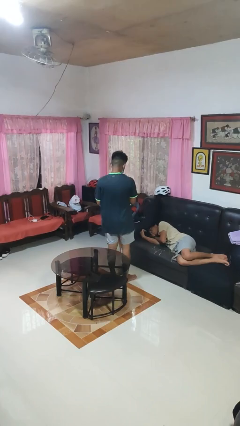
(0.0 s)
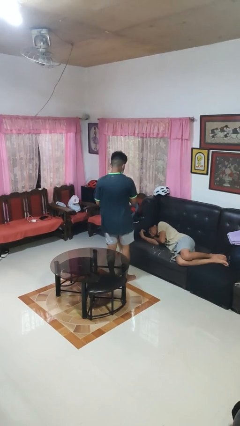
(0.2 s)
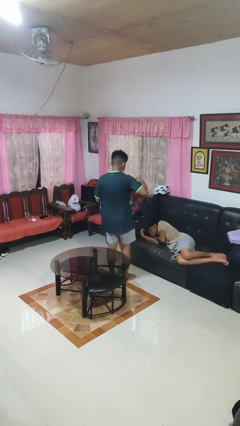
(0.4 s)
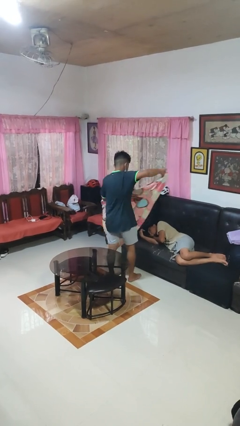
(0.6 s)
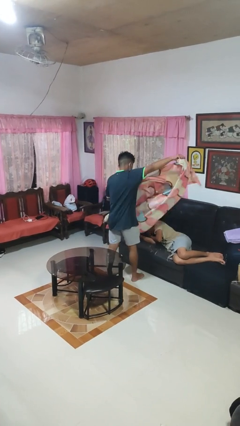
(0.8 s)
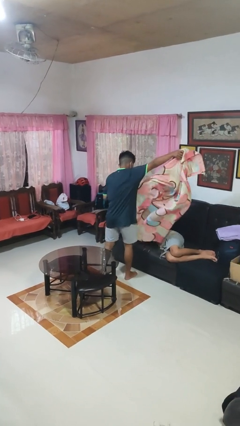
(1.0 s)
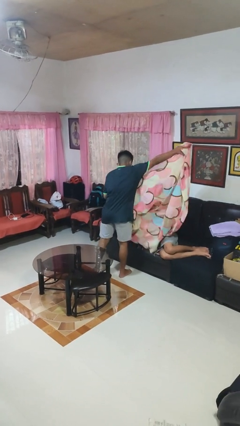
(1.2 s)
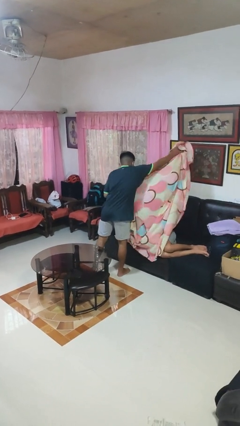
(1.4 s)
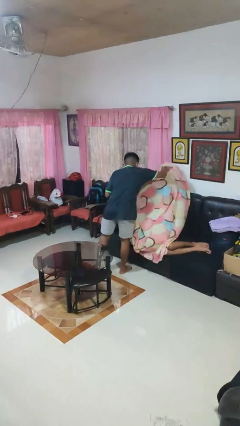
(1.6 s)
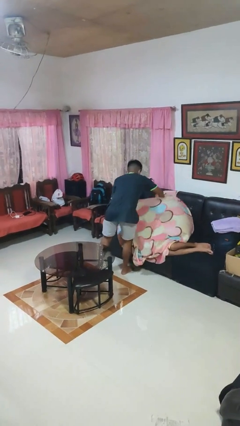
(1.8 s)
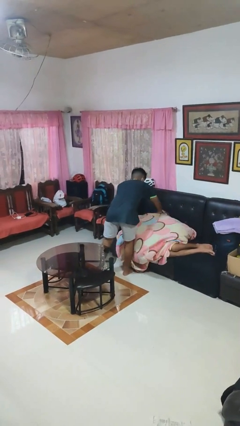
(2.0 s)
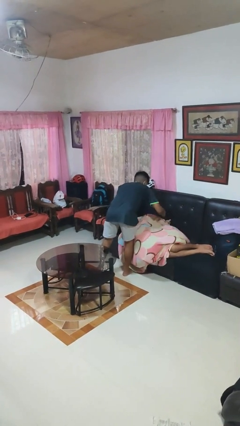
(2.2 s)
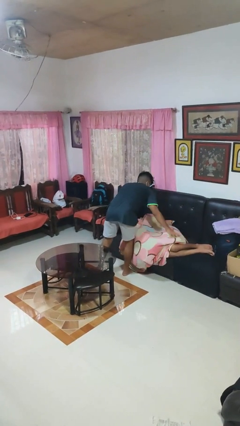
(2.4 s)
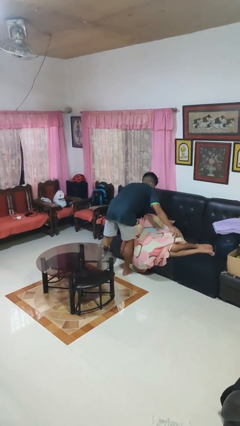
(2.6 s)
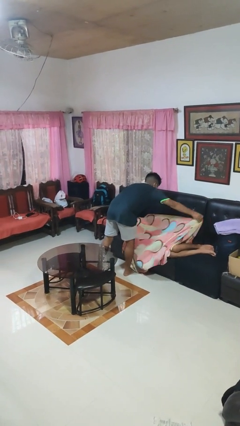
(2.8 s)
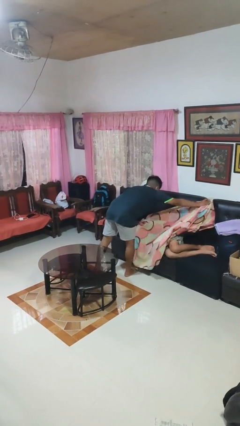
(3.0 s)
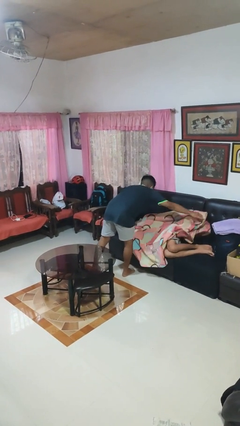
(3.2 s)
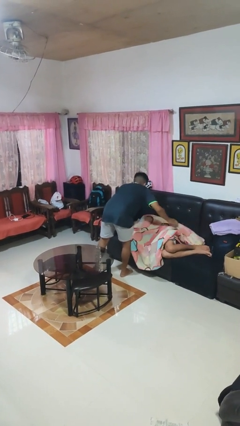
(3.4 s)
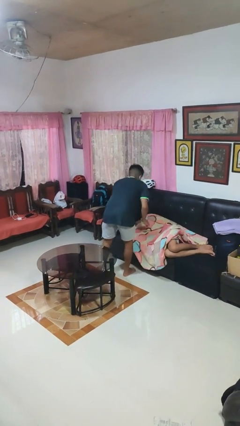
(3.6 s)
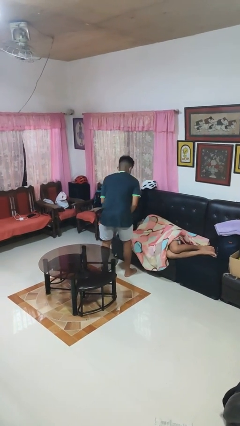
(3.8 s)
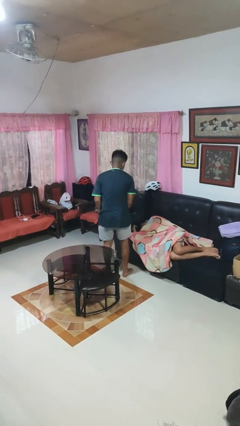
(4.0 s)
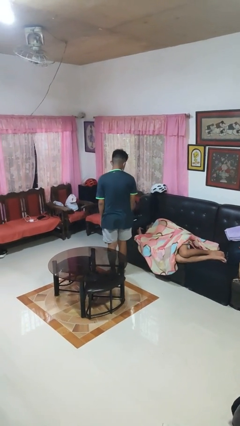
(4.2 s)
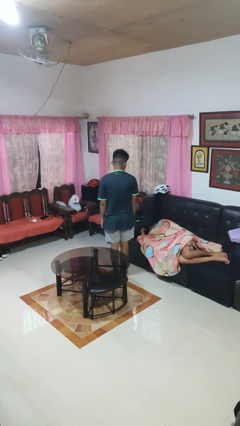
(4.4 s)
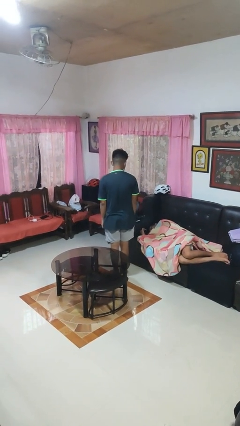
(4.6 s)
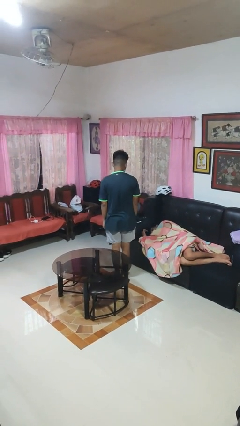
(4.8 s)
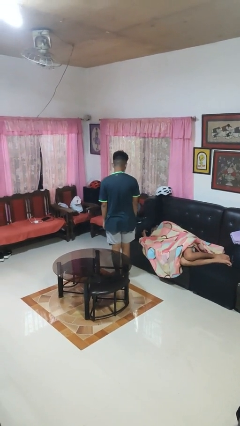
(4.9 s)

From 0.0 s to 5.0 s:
person covers friend with blanket

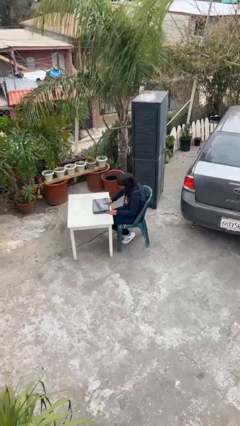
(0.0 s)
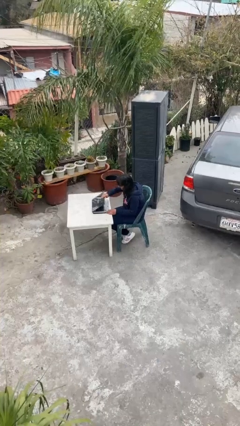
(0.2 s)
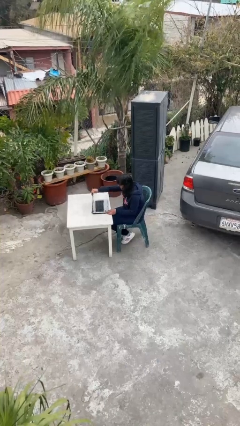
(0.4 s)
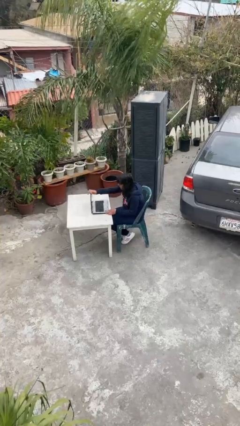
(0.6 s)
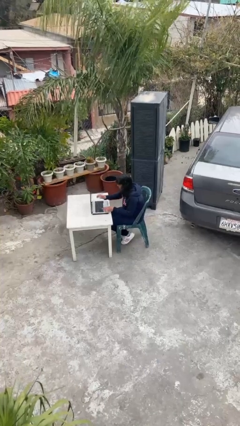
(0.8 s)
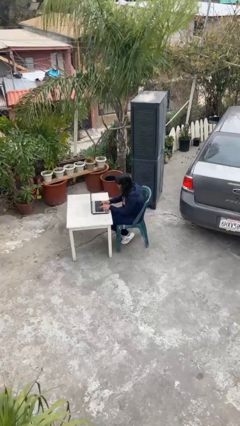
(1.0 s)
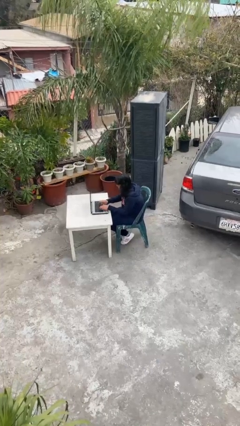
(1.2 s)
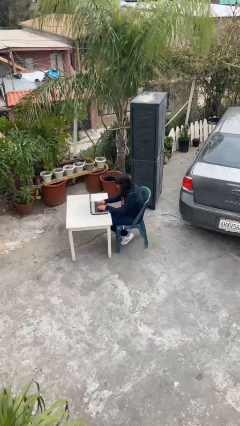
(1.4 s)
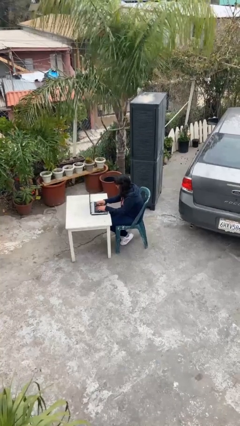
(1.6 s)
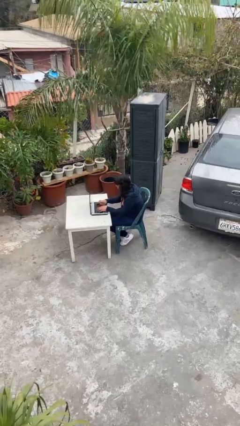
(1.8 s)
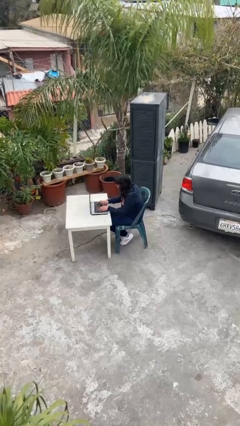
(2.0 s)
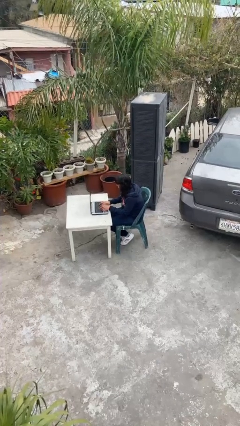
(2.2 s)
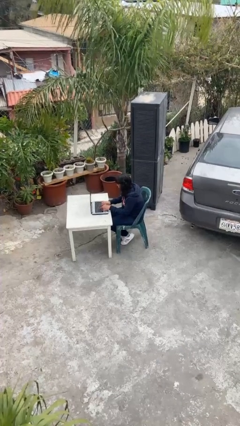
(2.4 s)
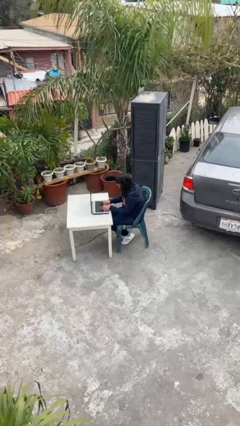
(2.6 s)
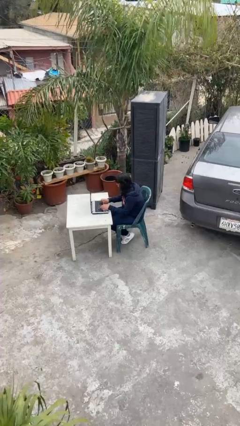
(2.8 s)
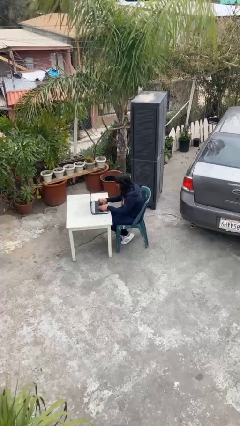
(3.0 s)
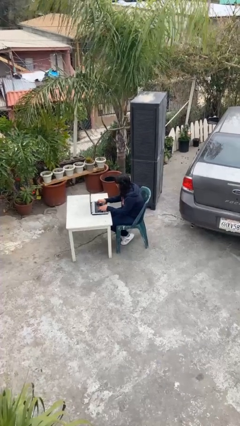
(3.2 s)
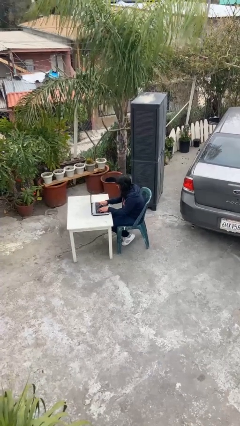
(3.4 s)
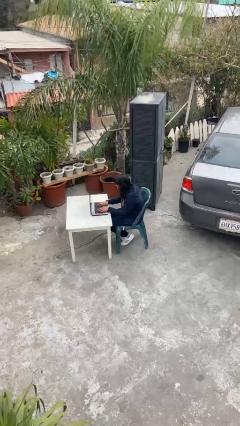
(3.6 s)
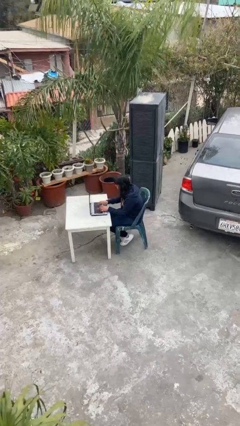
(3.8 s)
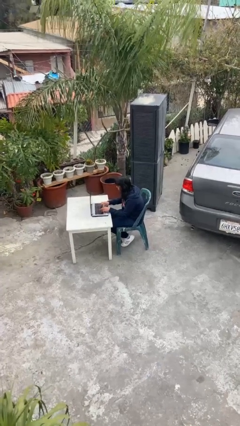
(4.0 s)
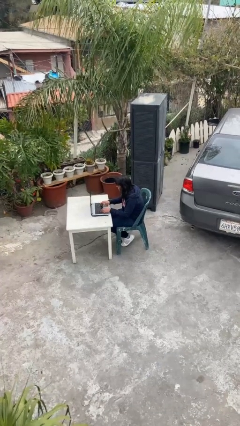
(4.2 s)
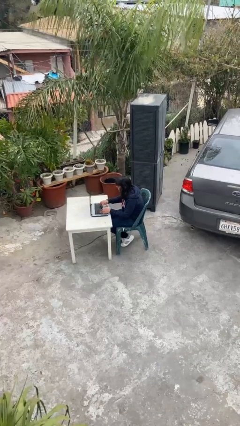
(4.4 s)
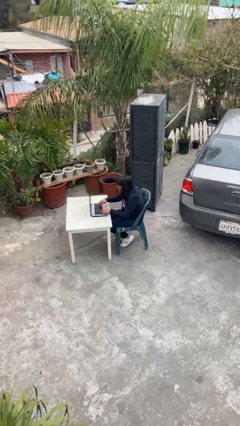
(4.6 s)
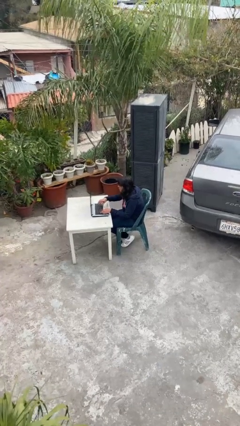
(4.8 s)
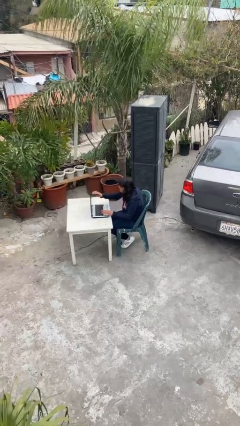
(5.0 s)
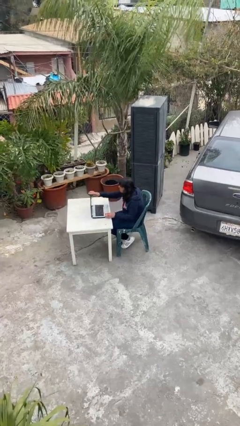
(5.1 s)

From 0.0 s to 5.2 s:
person interacts with laptop

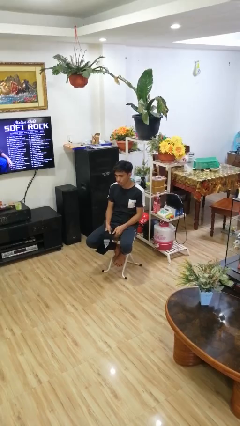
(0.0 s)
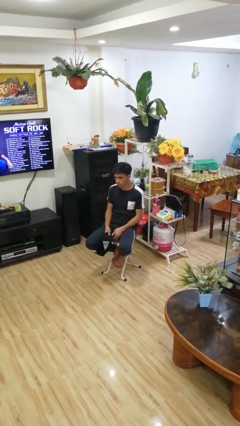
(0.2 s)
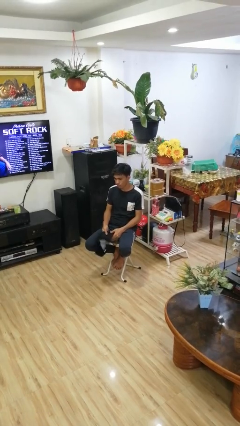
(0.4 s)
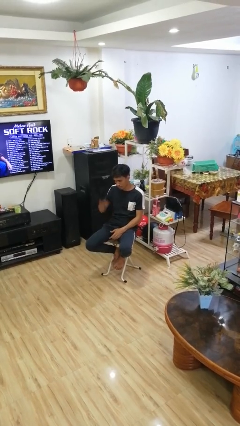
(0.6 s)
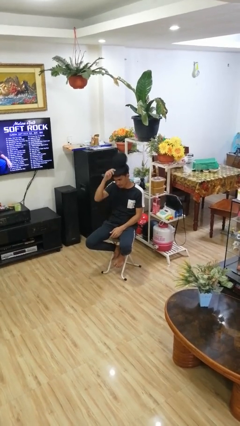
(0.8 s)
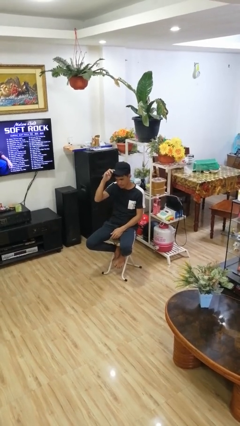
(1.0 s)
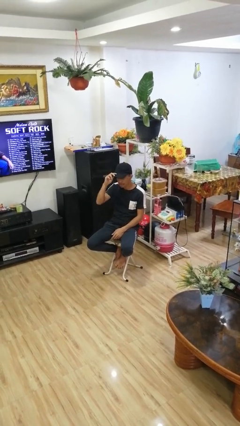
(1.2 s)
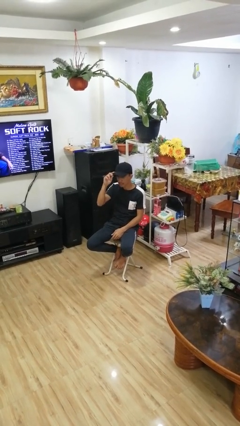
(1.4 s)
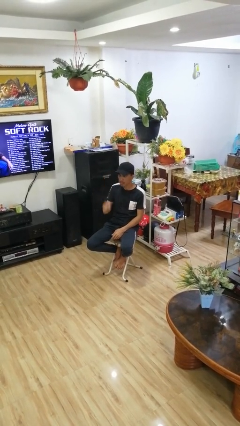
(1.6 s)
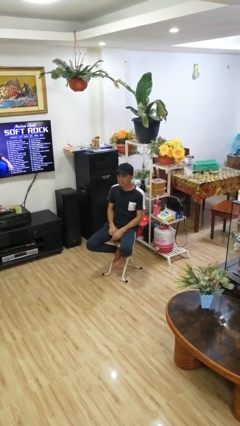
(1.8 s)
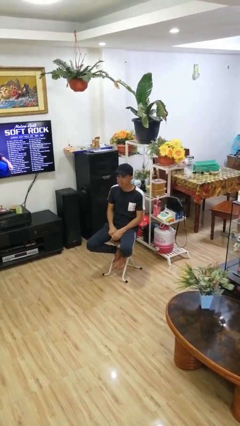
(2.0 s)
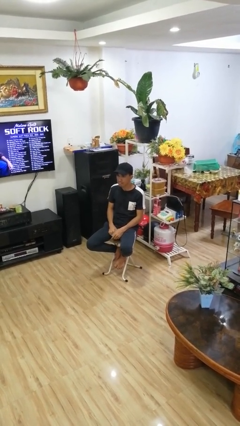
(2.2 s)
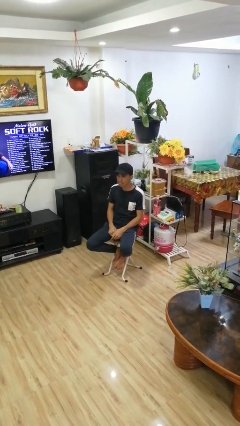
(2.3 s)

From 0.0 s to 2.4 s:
person puts on hat

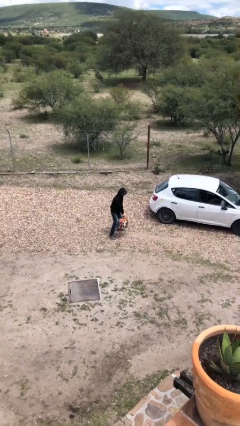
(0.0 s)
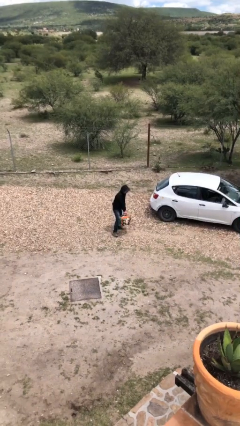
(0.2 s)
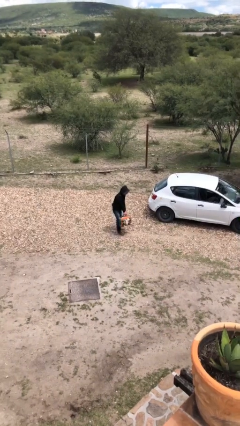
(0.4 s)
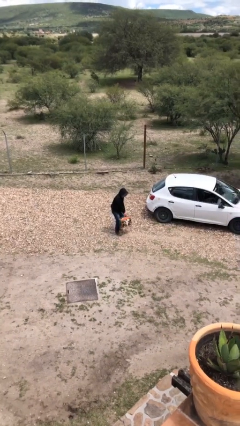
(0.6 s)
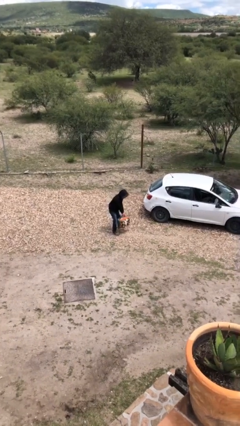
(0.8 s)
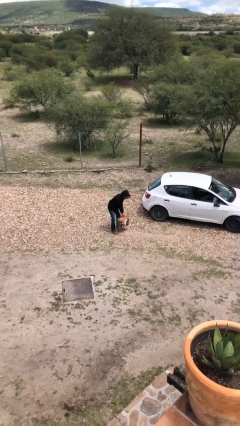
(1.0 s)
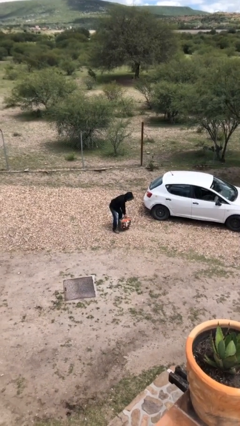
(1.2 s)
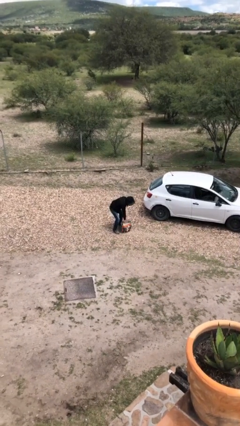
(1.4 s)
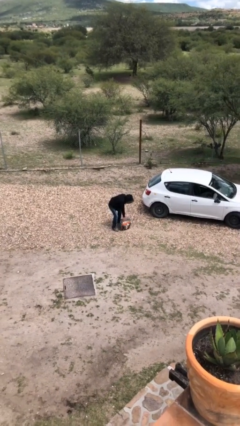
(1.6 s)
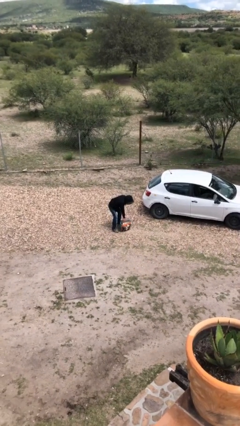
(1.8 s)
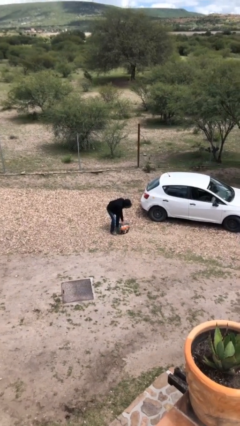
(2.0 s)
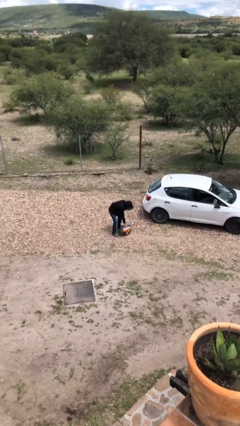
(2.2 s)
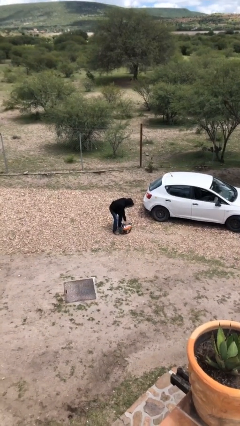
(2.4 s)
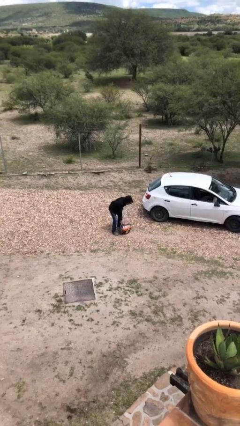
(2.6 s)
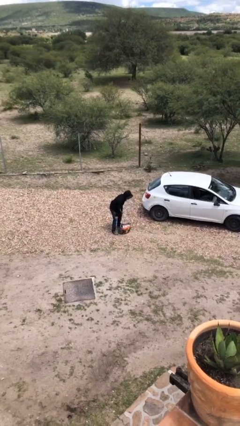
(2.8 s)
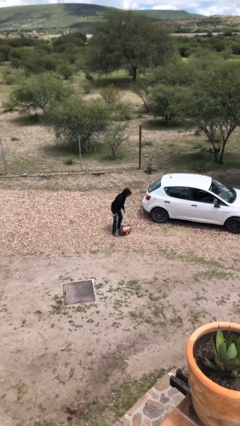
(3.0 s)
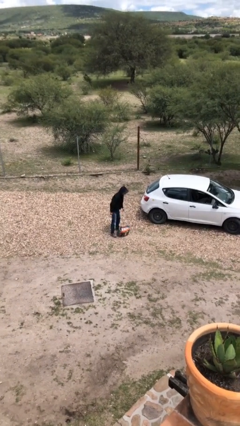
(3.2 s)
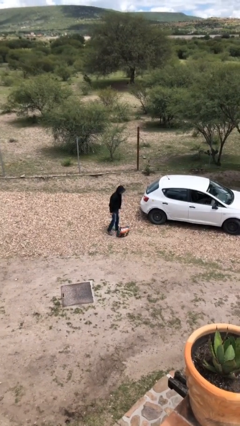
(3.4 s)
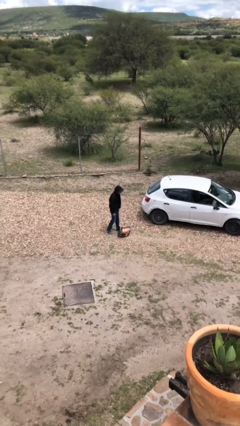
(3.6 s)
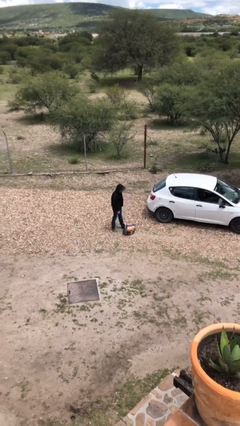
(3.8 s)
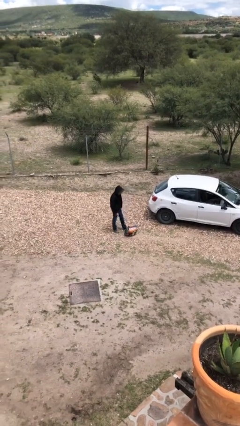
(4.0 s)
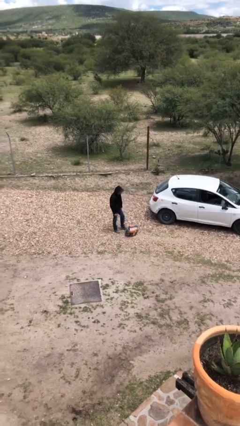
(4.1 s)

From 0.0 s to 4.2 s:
person puts down object on floor

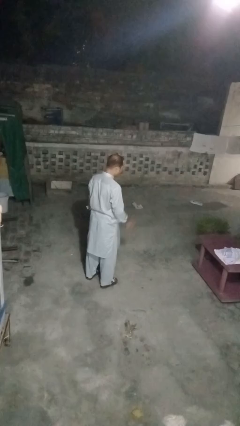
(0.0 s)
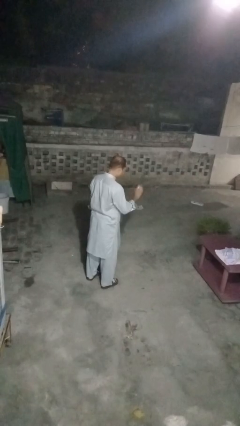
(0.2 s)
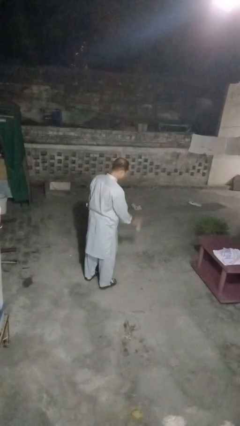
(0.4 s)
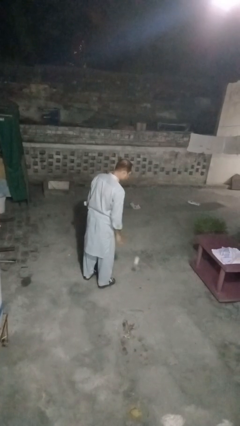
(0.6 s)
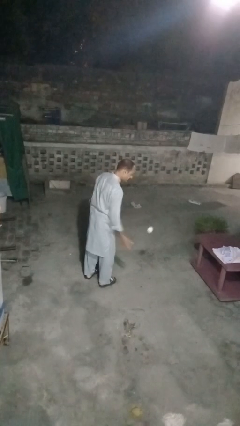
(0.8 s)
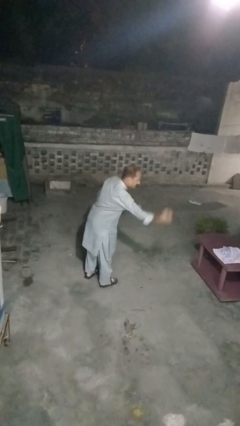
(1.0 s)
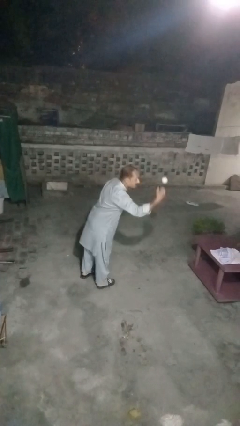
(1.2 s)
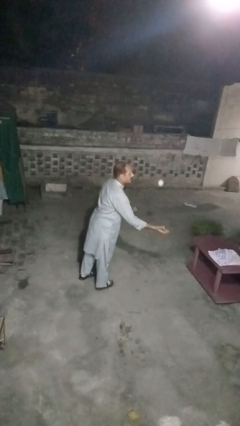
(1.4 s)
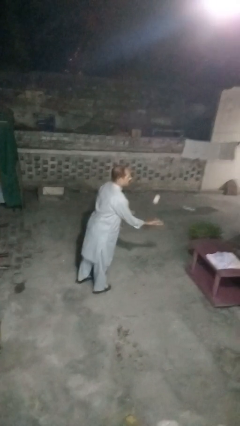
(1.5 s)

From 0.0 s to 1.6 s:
person bounces ball on floor
